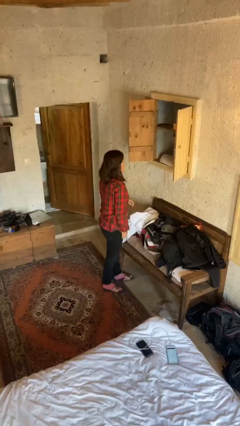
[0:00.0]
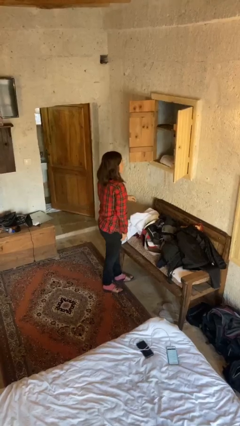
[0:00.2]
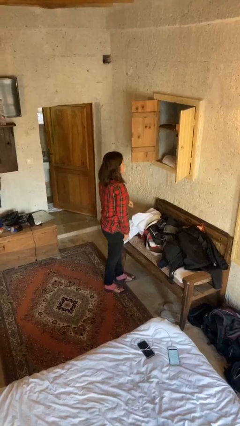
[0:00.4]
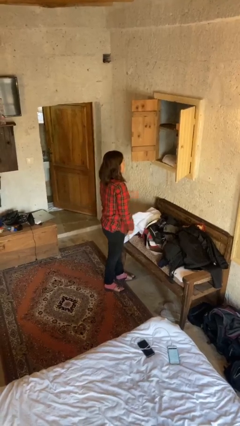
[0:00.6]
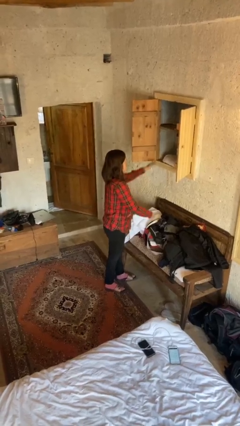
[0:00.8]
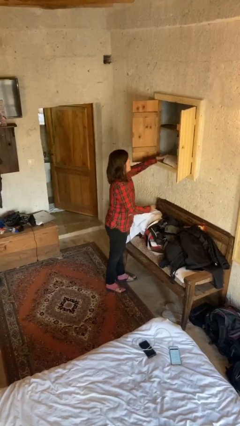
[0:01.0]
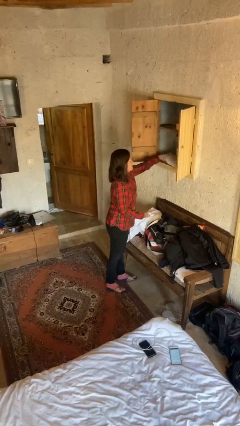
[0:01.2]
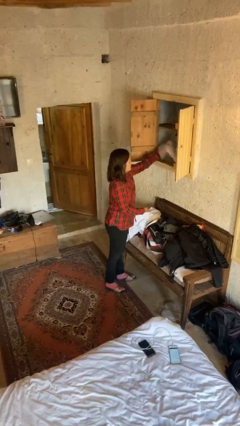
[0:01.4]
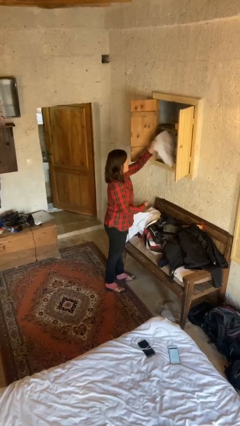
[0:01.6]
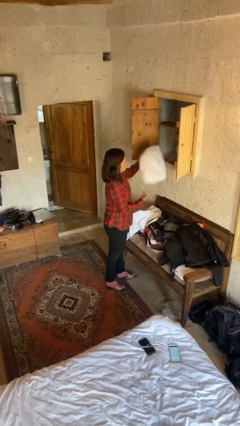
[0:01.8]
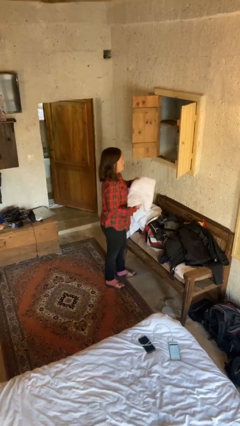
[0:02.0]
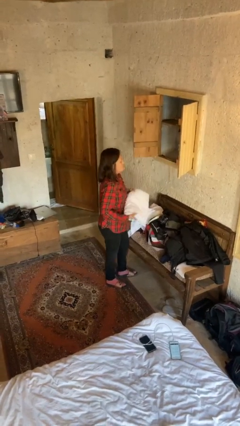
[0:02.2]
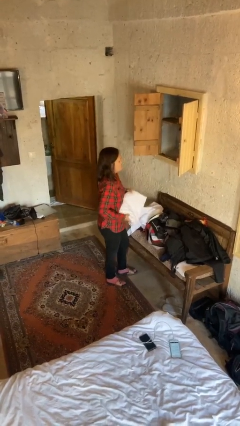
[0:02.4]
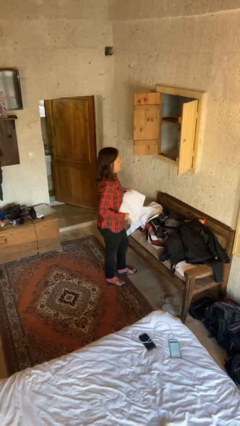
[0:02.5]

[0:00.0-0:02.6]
person takes clothes from dresser

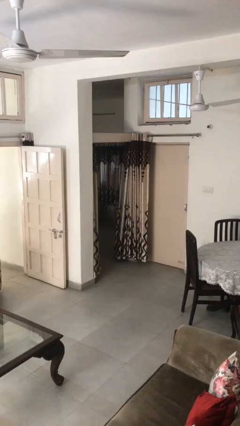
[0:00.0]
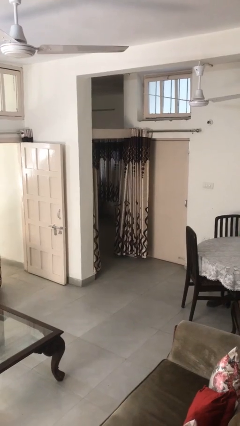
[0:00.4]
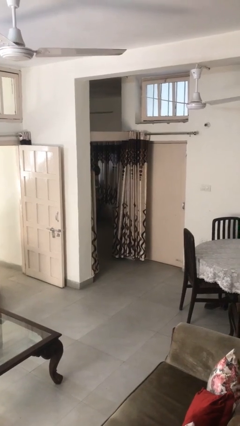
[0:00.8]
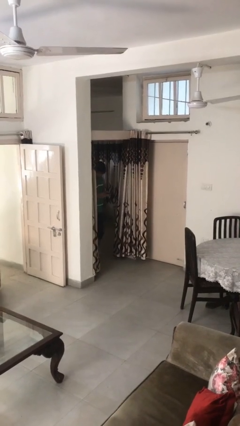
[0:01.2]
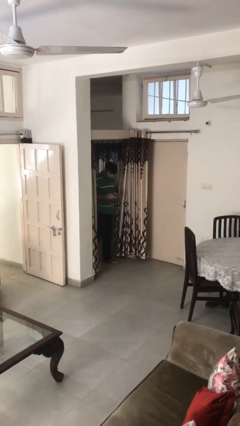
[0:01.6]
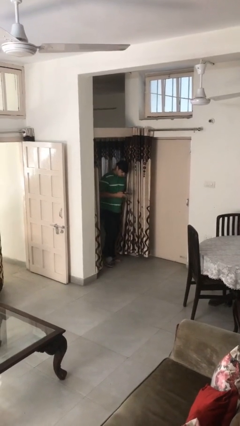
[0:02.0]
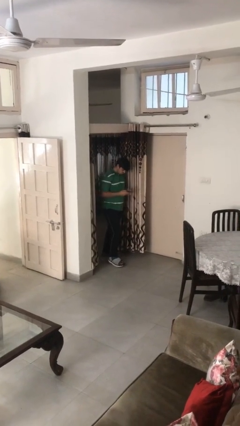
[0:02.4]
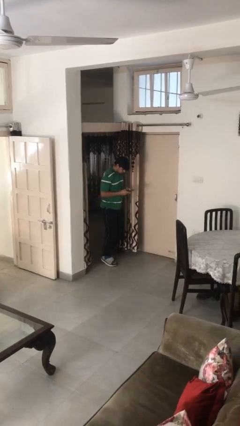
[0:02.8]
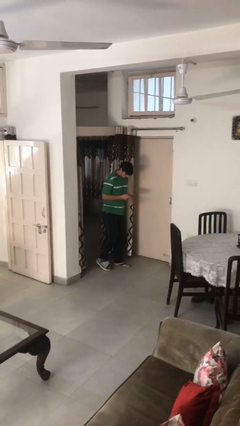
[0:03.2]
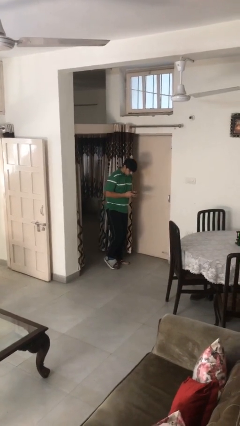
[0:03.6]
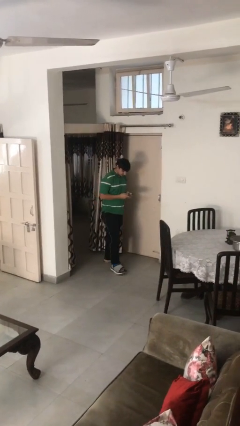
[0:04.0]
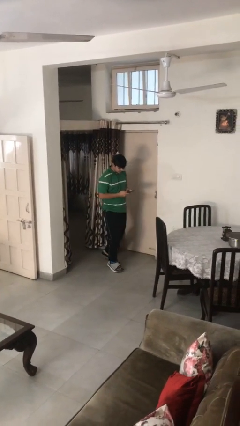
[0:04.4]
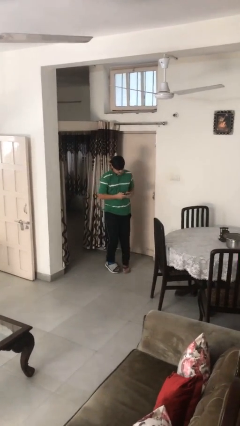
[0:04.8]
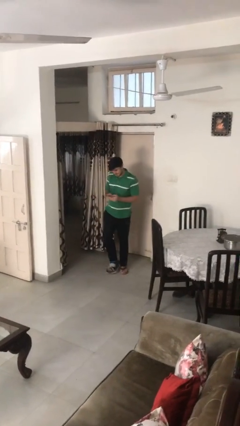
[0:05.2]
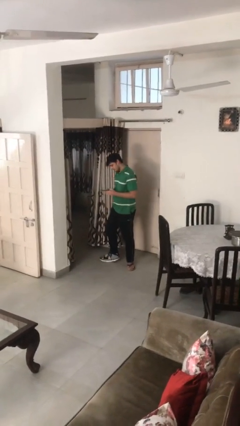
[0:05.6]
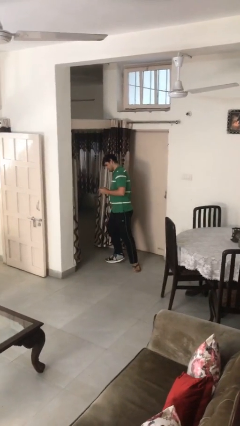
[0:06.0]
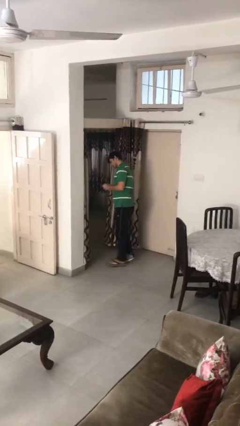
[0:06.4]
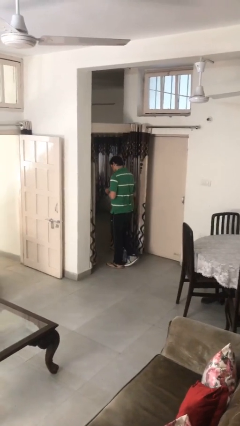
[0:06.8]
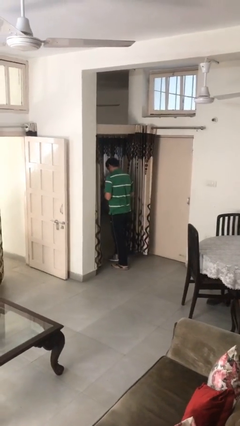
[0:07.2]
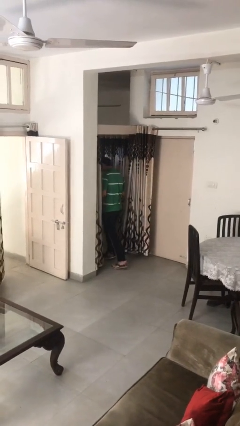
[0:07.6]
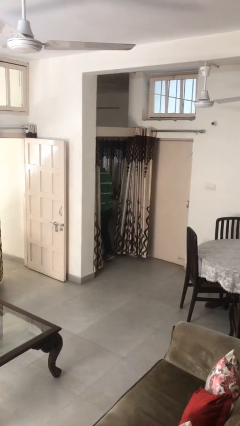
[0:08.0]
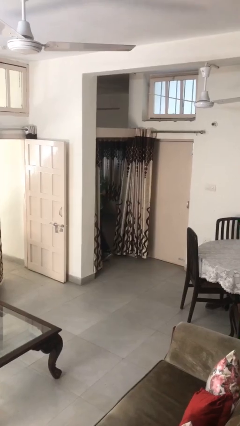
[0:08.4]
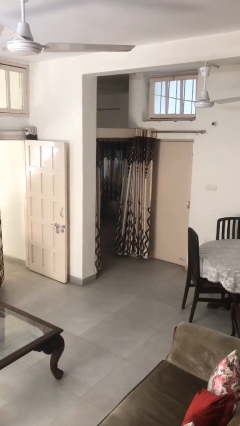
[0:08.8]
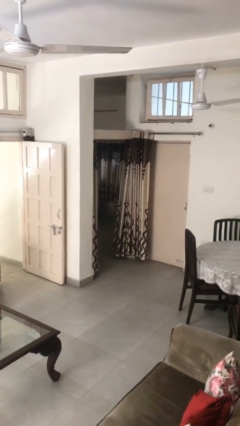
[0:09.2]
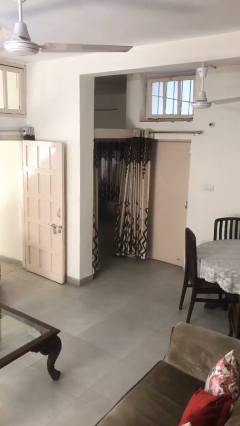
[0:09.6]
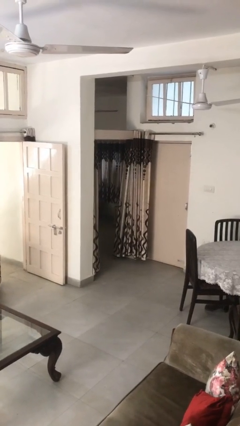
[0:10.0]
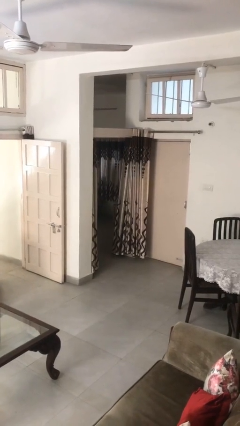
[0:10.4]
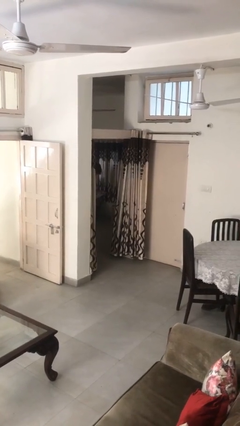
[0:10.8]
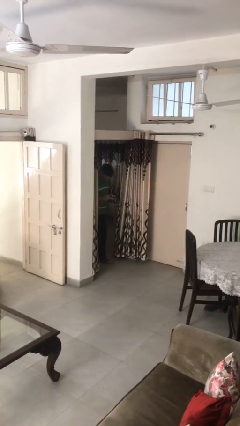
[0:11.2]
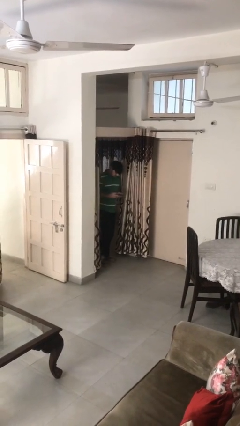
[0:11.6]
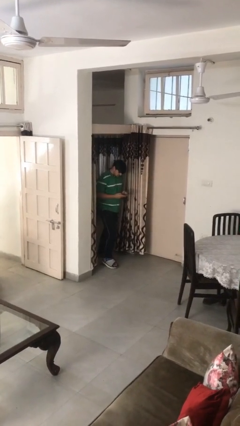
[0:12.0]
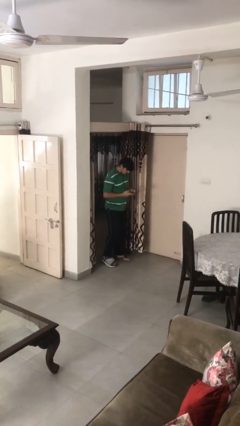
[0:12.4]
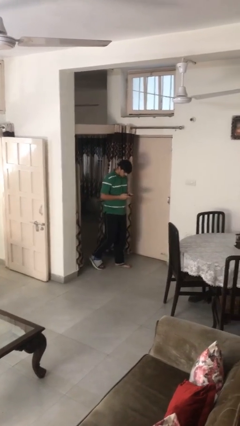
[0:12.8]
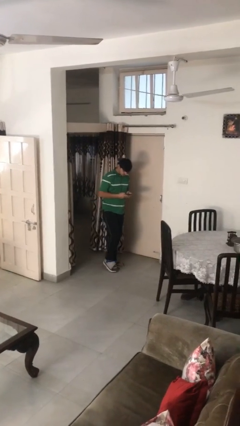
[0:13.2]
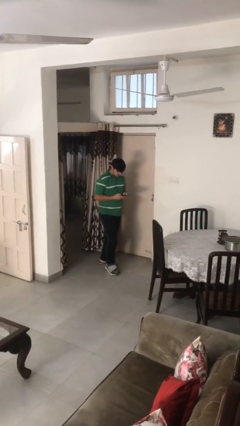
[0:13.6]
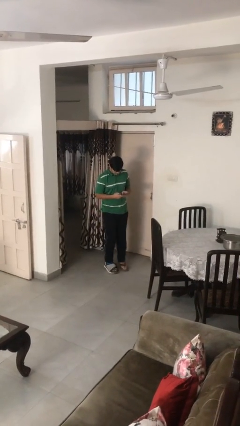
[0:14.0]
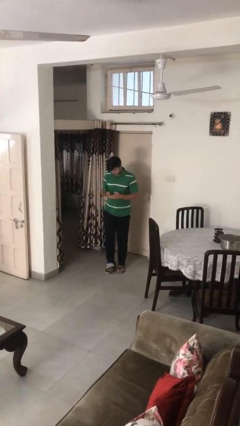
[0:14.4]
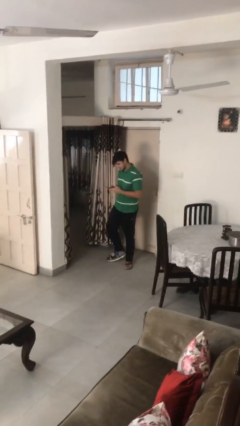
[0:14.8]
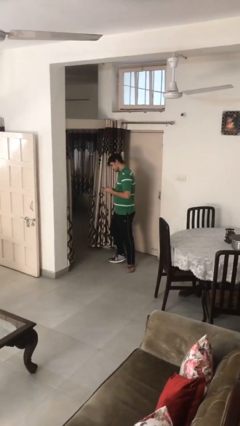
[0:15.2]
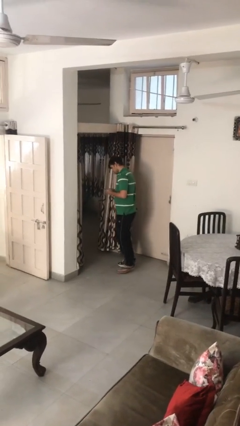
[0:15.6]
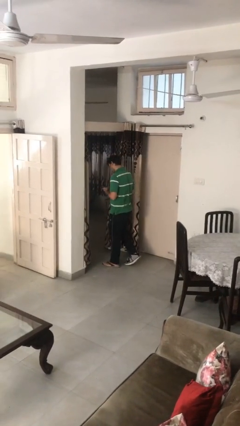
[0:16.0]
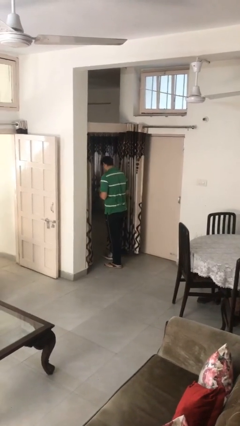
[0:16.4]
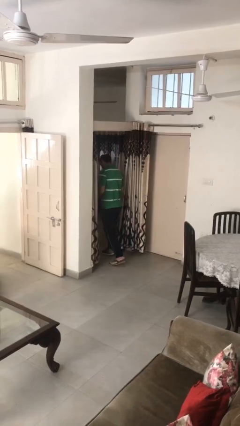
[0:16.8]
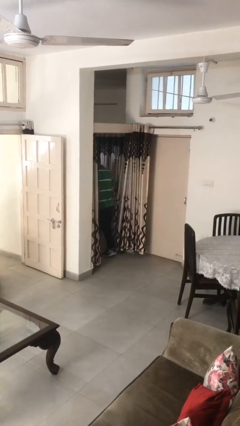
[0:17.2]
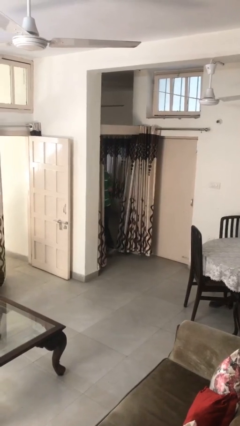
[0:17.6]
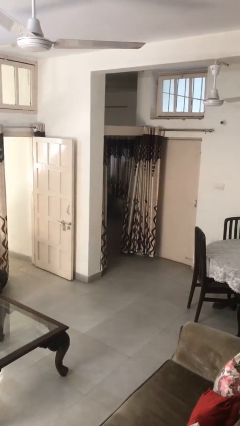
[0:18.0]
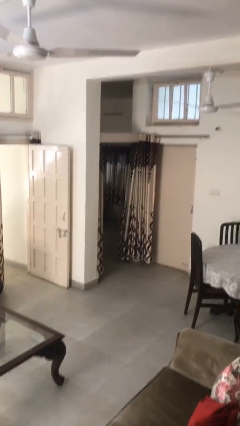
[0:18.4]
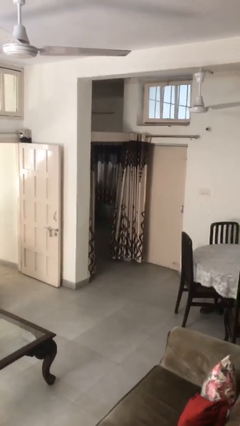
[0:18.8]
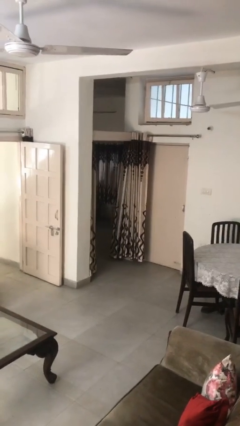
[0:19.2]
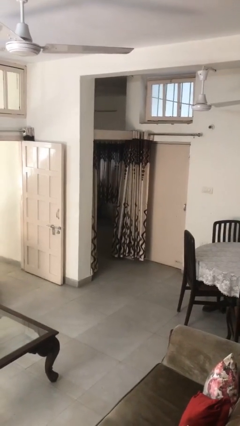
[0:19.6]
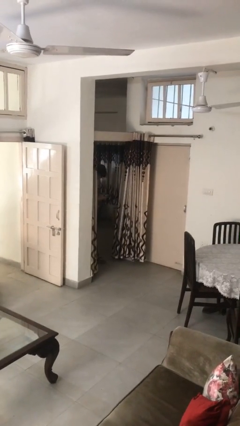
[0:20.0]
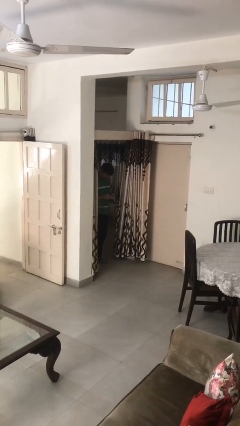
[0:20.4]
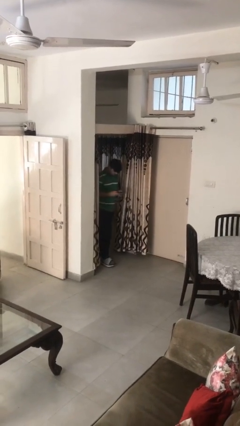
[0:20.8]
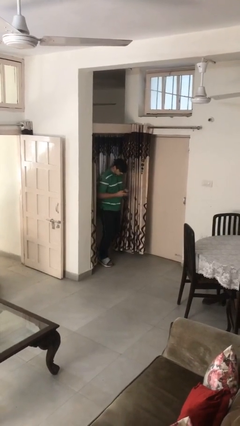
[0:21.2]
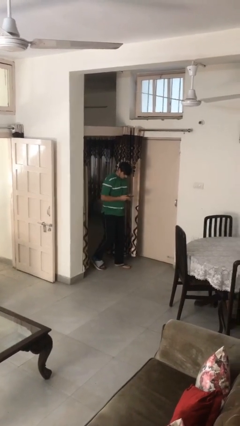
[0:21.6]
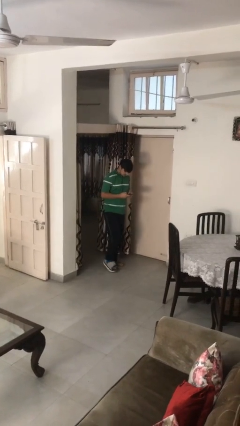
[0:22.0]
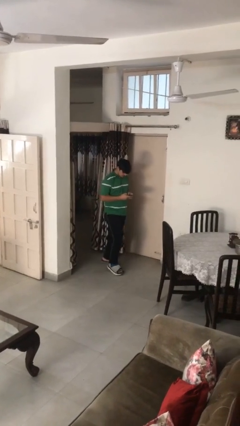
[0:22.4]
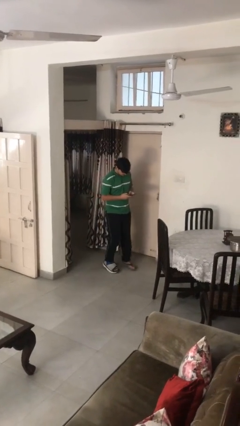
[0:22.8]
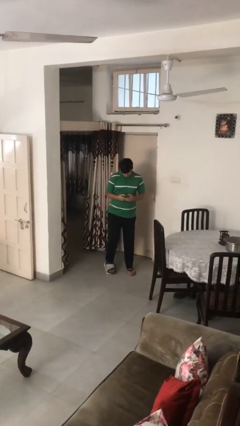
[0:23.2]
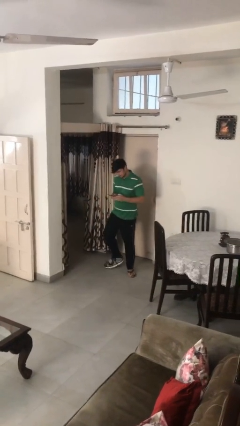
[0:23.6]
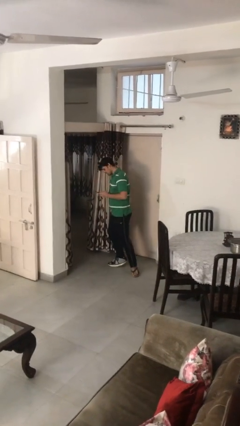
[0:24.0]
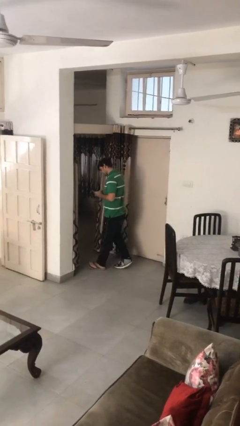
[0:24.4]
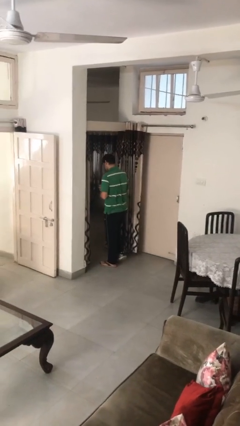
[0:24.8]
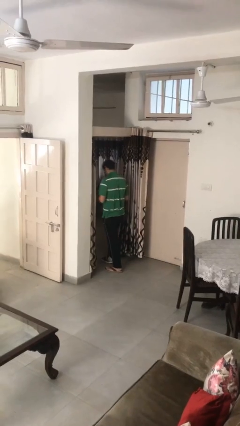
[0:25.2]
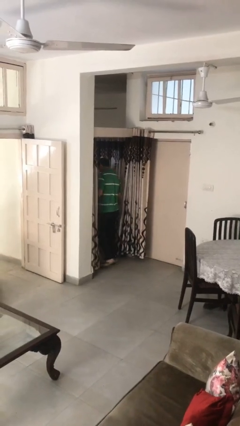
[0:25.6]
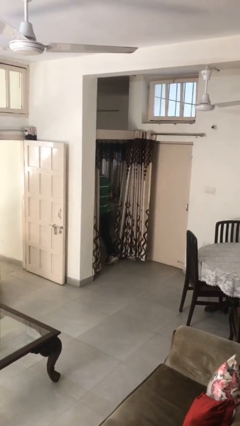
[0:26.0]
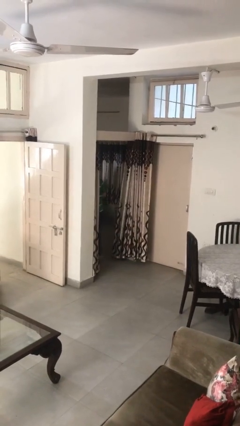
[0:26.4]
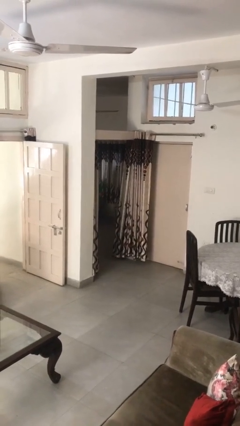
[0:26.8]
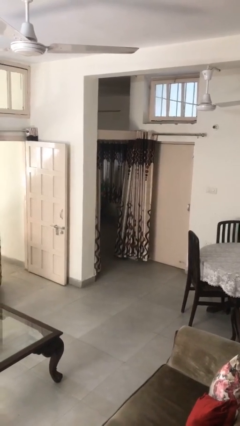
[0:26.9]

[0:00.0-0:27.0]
person texts on phone

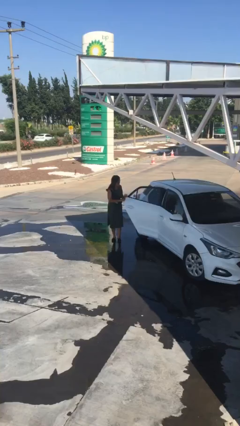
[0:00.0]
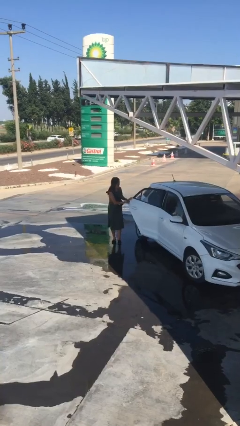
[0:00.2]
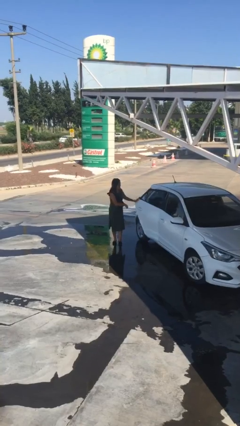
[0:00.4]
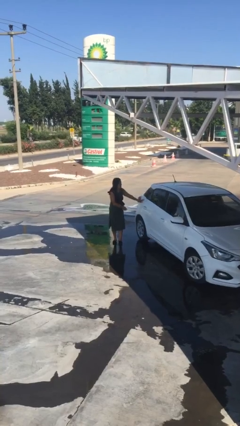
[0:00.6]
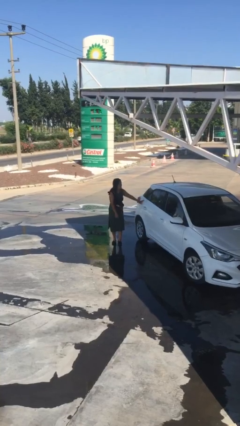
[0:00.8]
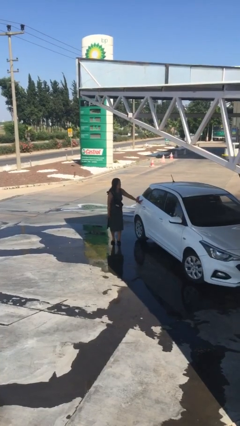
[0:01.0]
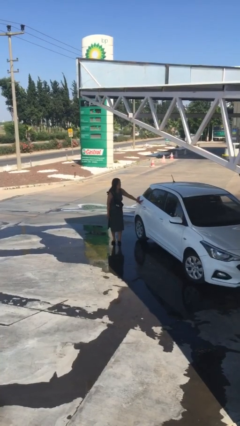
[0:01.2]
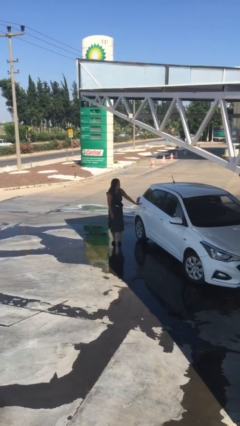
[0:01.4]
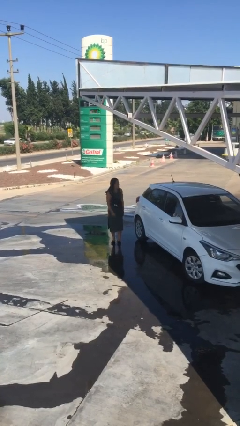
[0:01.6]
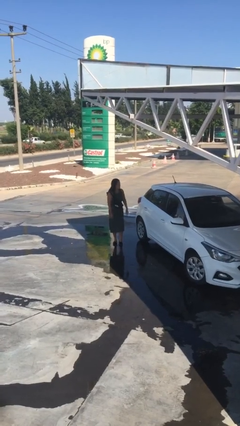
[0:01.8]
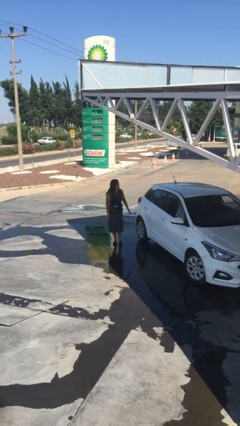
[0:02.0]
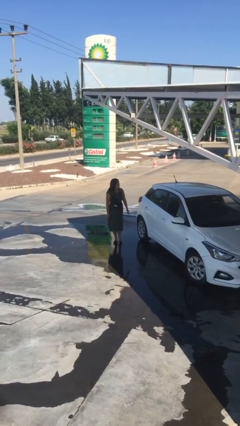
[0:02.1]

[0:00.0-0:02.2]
person closes car door

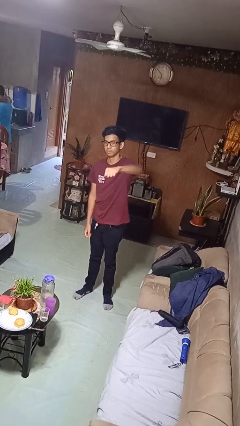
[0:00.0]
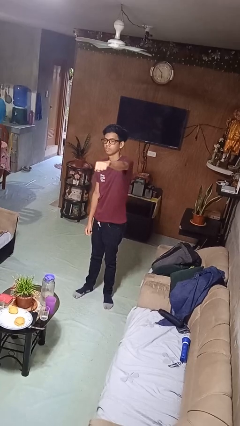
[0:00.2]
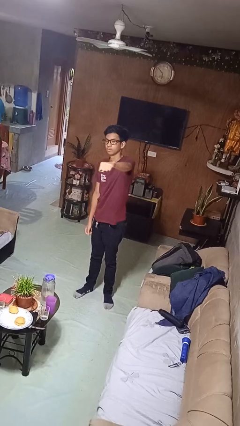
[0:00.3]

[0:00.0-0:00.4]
person punches
